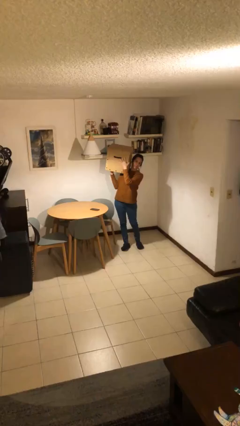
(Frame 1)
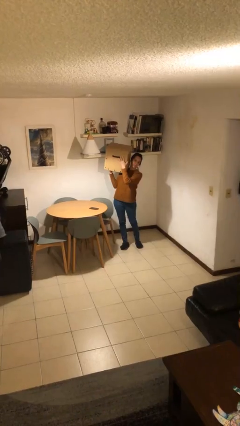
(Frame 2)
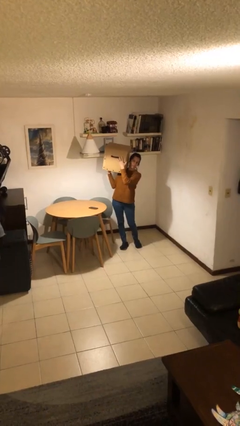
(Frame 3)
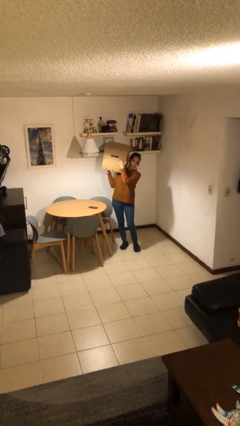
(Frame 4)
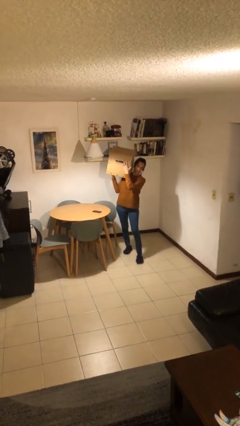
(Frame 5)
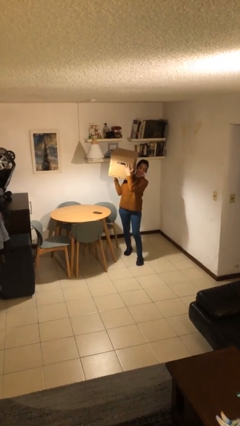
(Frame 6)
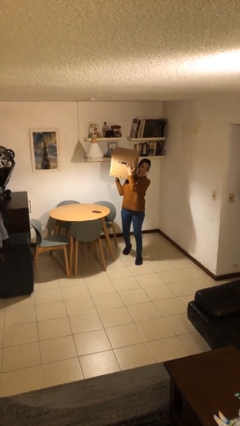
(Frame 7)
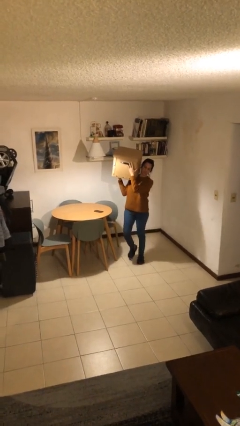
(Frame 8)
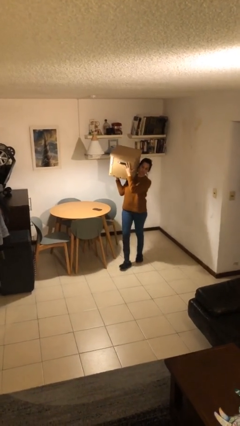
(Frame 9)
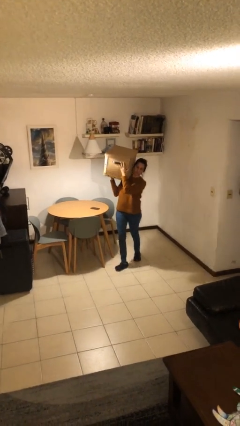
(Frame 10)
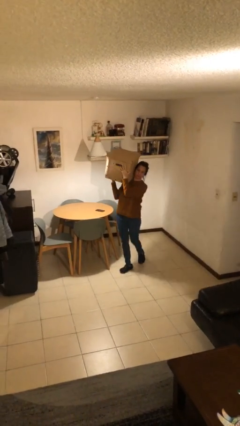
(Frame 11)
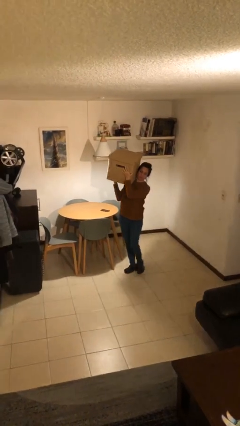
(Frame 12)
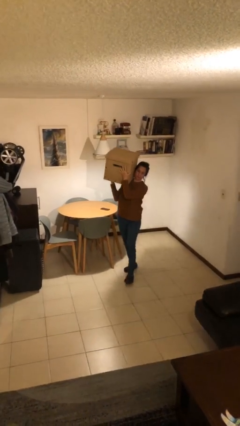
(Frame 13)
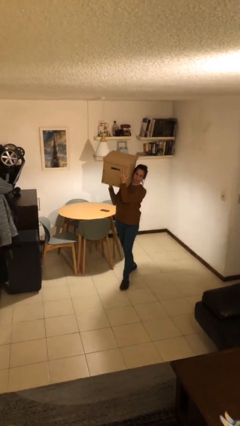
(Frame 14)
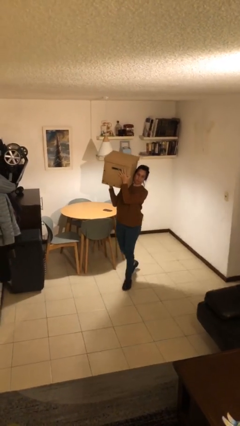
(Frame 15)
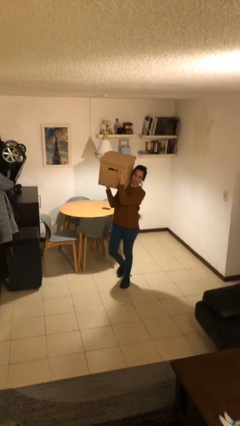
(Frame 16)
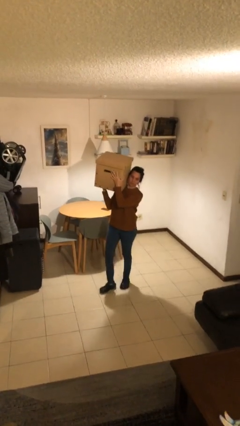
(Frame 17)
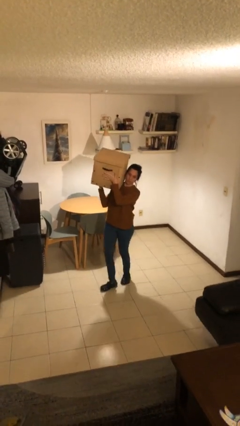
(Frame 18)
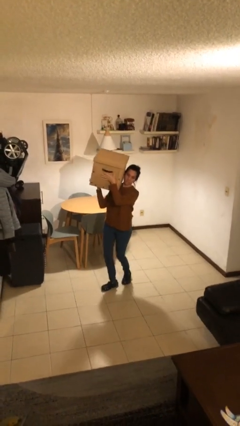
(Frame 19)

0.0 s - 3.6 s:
person carries heavy object

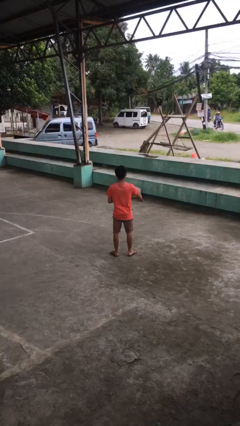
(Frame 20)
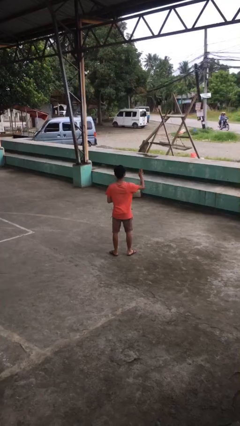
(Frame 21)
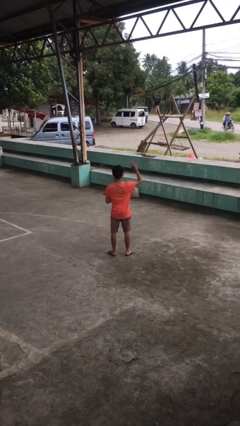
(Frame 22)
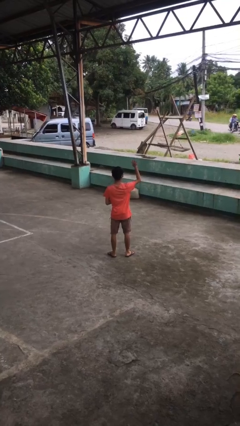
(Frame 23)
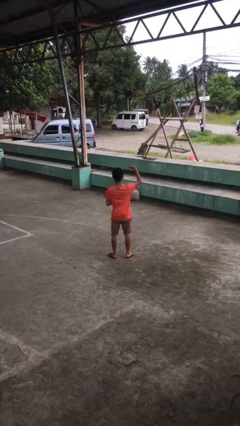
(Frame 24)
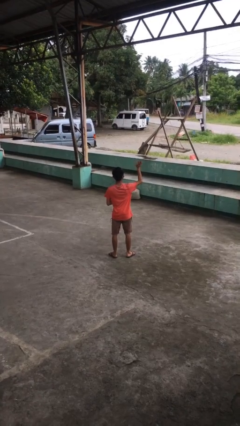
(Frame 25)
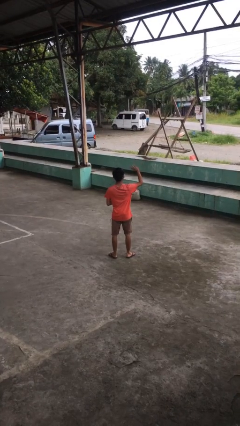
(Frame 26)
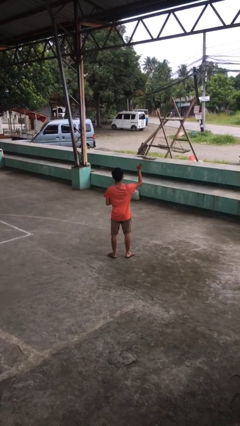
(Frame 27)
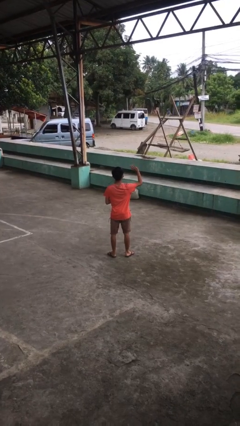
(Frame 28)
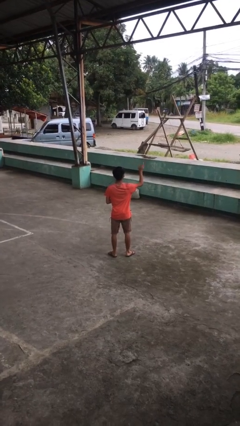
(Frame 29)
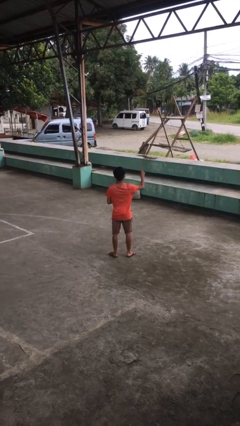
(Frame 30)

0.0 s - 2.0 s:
person waves at person

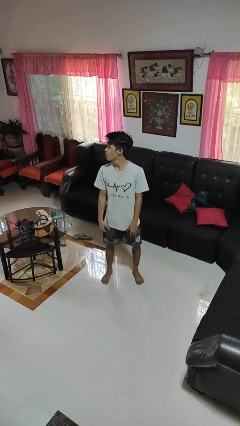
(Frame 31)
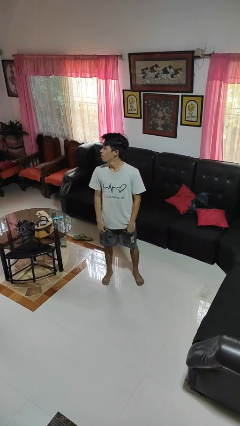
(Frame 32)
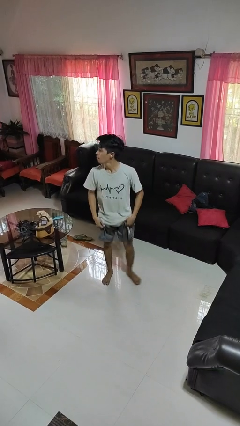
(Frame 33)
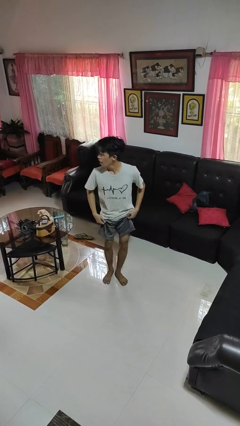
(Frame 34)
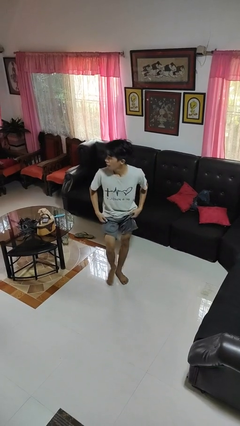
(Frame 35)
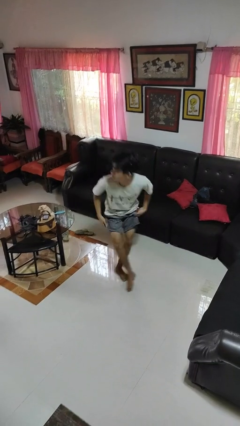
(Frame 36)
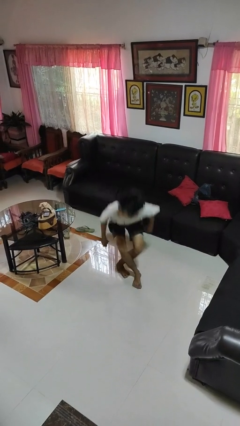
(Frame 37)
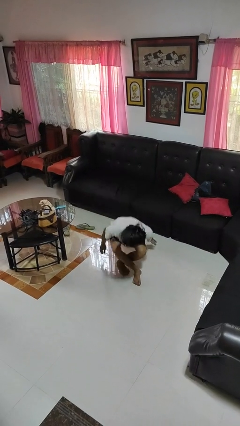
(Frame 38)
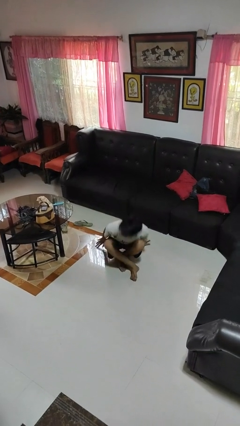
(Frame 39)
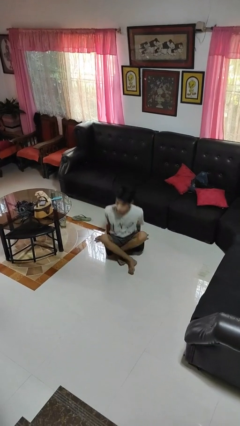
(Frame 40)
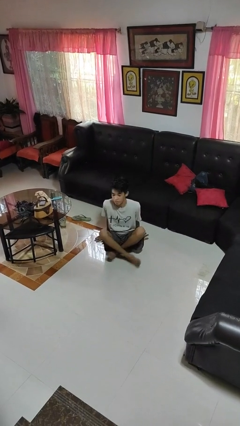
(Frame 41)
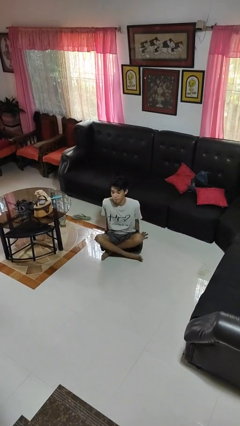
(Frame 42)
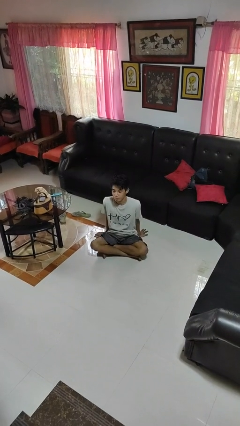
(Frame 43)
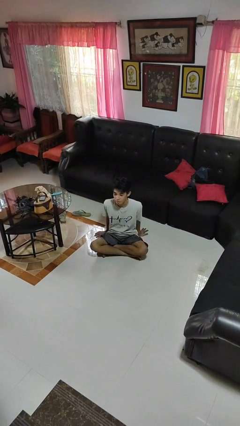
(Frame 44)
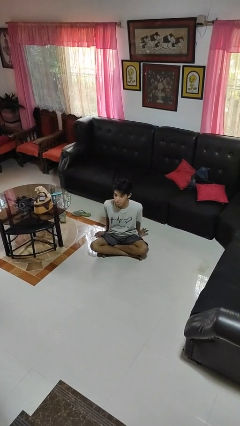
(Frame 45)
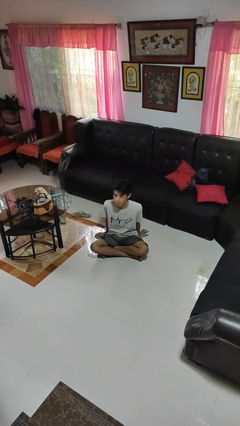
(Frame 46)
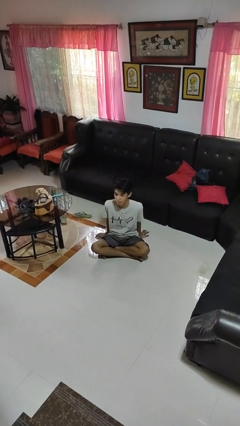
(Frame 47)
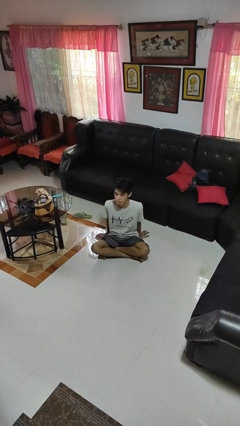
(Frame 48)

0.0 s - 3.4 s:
person sits crisscross

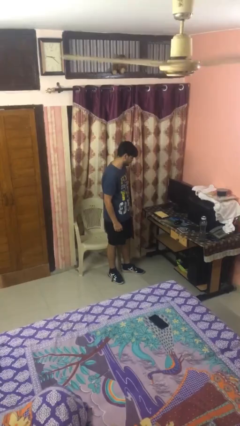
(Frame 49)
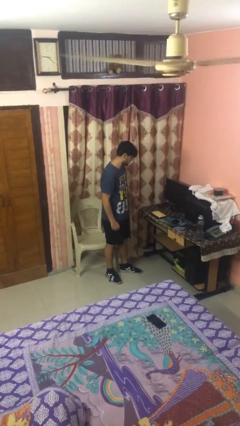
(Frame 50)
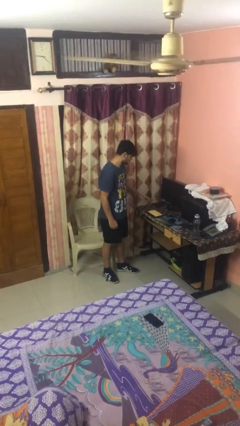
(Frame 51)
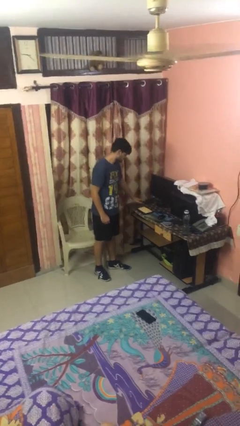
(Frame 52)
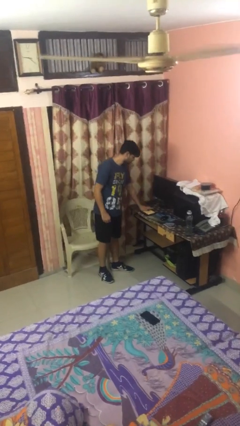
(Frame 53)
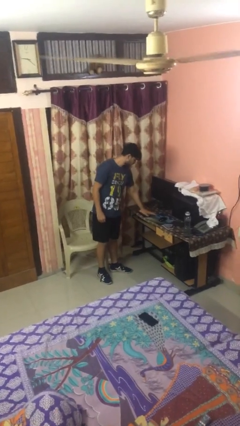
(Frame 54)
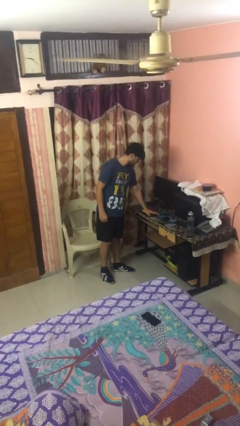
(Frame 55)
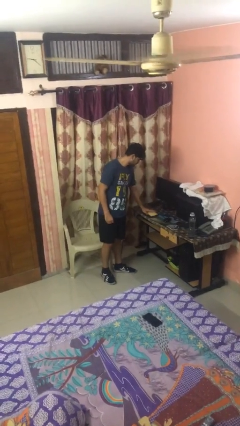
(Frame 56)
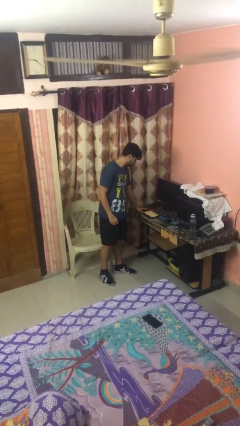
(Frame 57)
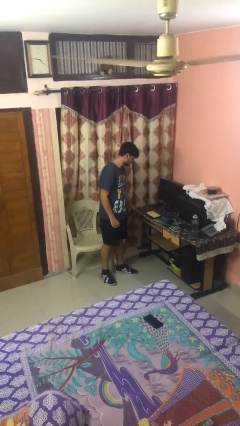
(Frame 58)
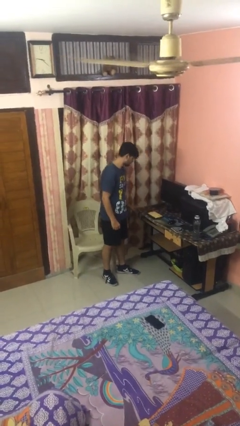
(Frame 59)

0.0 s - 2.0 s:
person waves hand over object

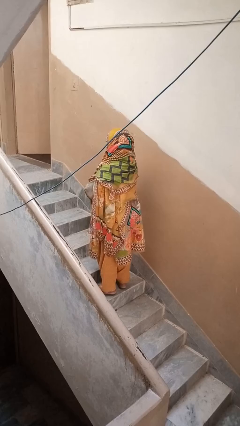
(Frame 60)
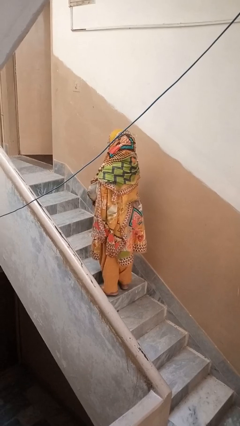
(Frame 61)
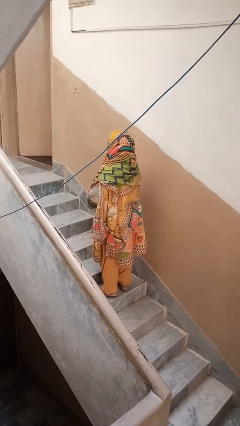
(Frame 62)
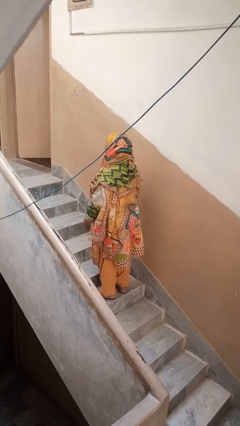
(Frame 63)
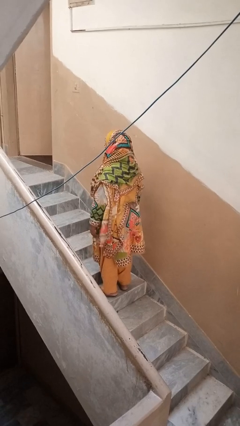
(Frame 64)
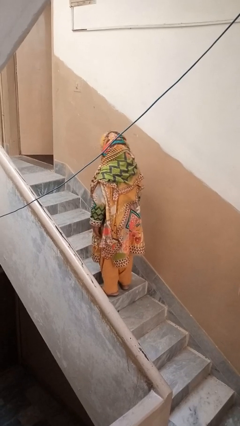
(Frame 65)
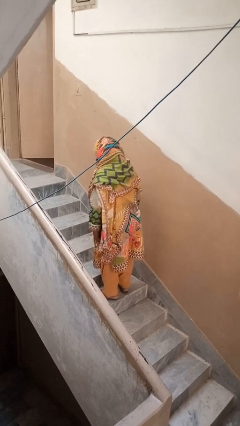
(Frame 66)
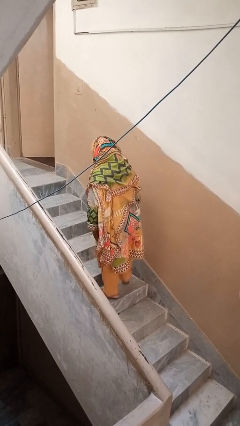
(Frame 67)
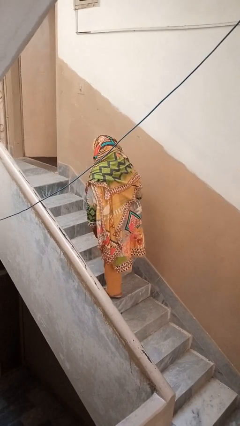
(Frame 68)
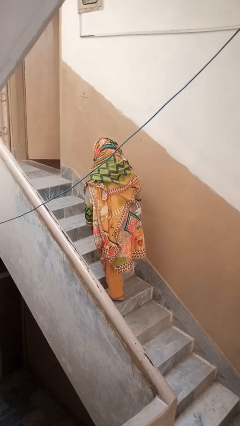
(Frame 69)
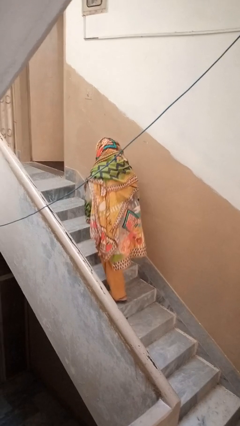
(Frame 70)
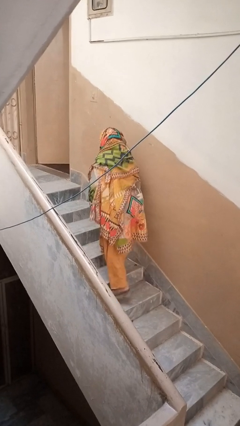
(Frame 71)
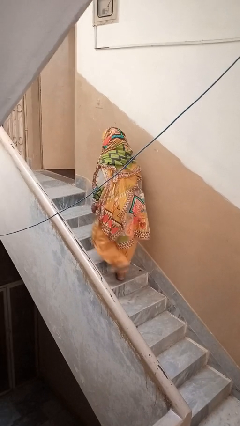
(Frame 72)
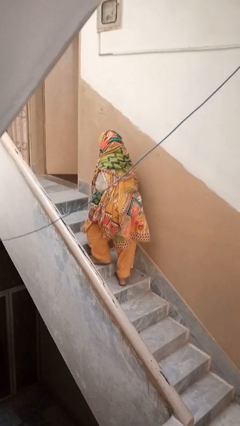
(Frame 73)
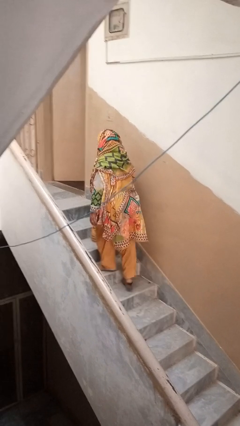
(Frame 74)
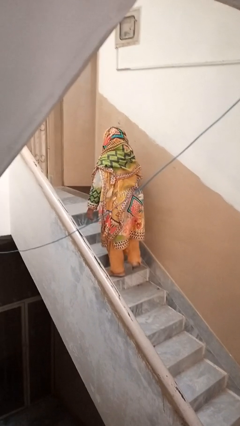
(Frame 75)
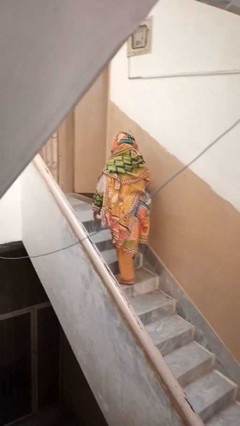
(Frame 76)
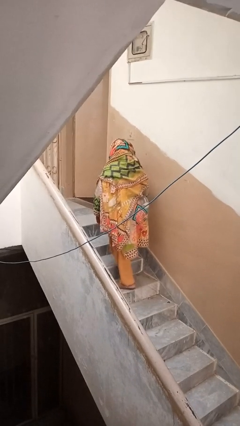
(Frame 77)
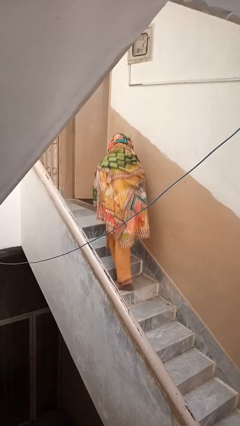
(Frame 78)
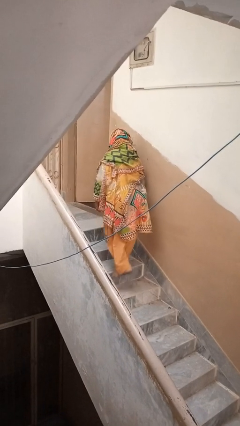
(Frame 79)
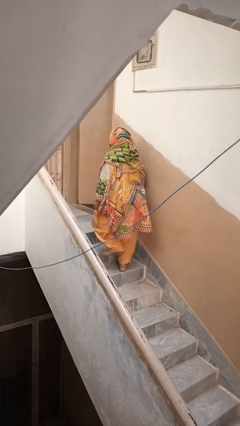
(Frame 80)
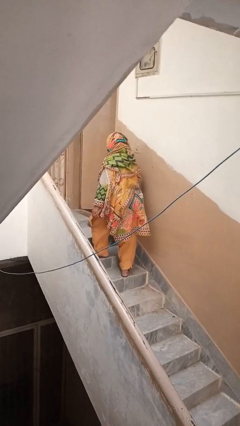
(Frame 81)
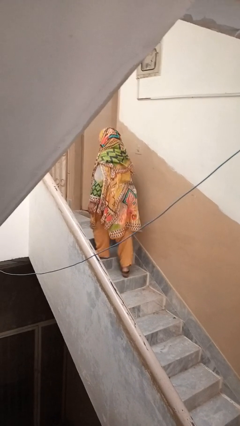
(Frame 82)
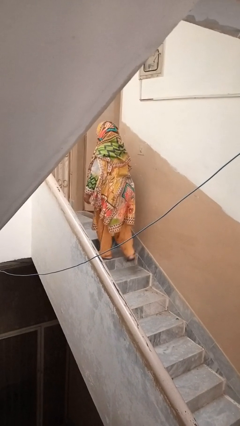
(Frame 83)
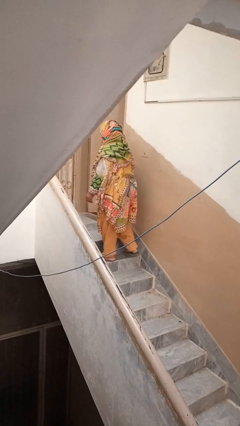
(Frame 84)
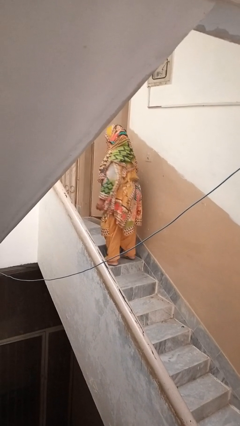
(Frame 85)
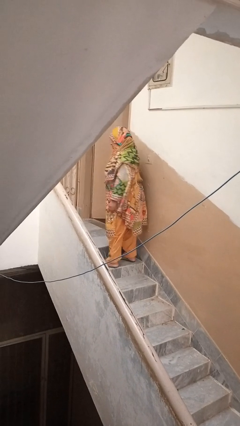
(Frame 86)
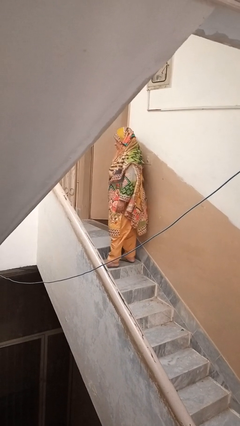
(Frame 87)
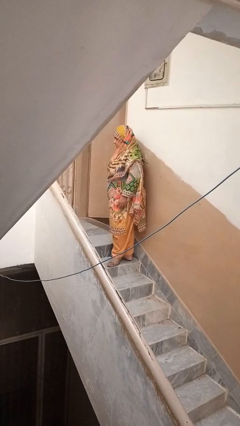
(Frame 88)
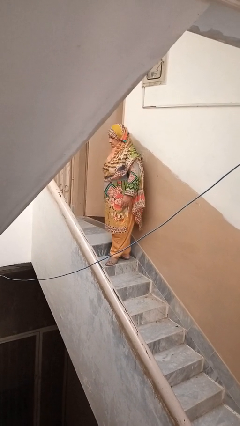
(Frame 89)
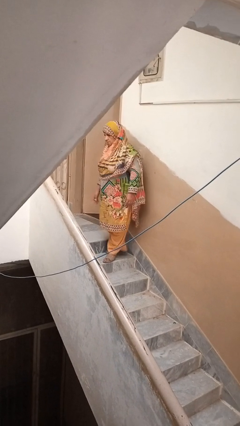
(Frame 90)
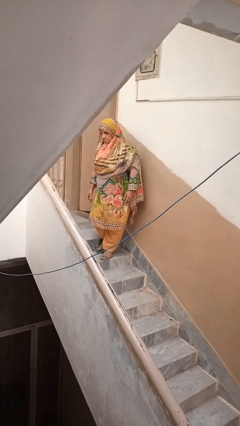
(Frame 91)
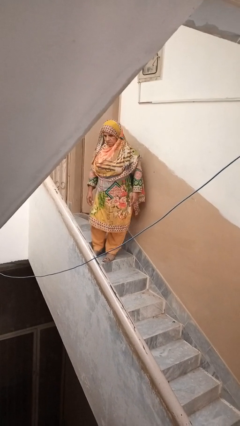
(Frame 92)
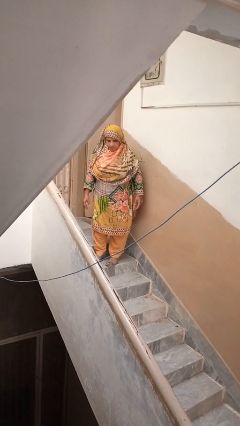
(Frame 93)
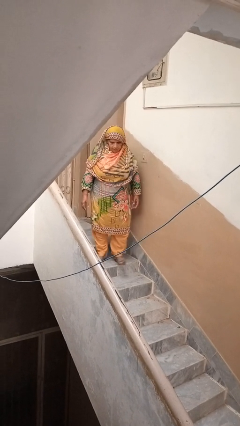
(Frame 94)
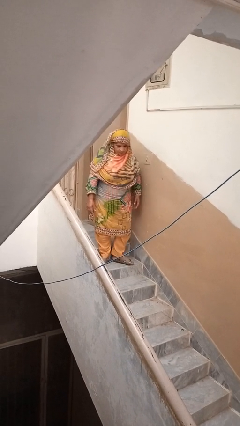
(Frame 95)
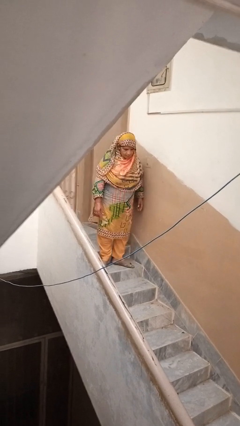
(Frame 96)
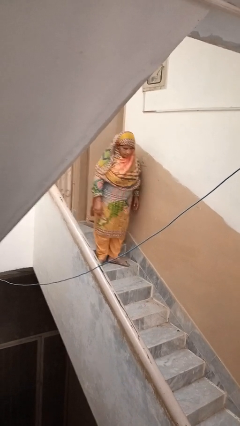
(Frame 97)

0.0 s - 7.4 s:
person climbs up stairs
